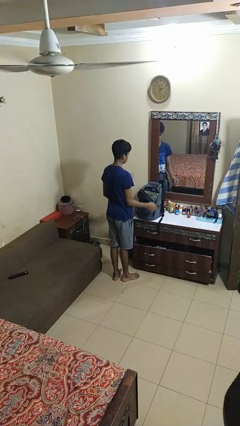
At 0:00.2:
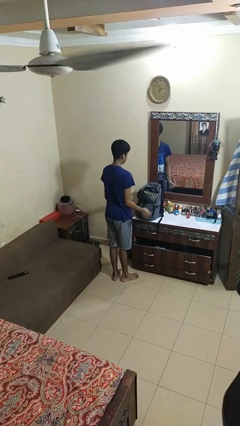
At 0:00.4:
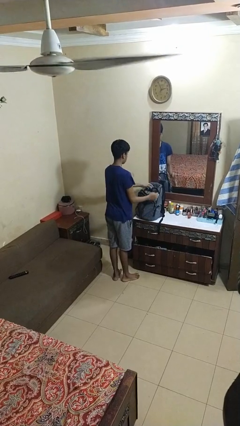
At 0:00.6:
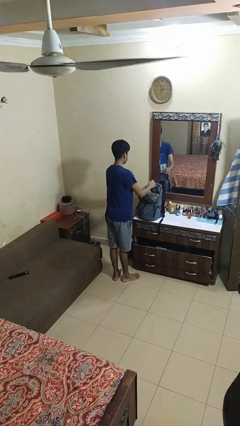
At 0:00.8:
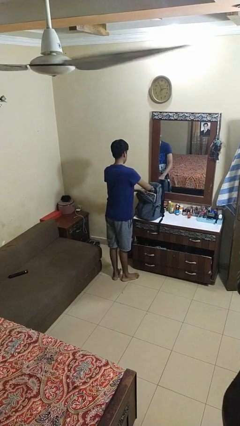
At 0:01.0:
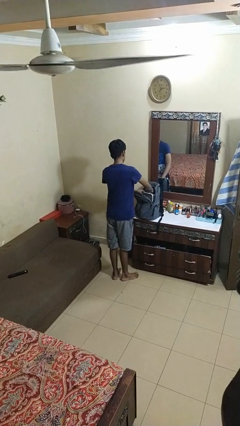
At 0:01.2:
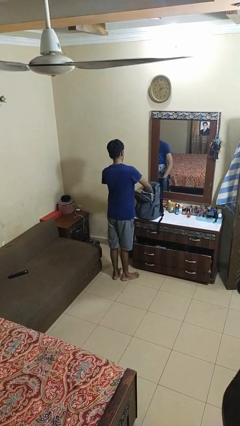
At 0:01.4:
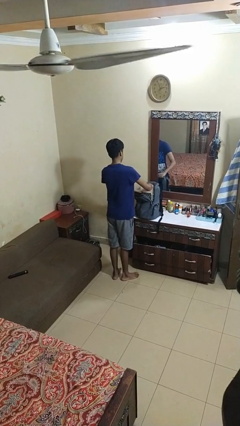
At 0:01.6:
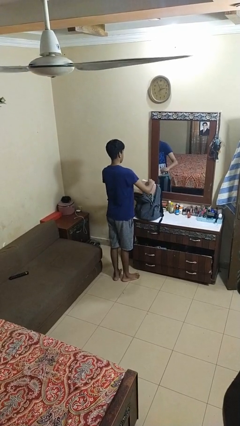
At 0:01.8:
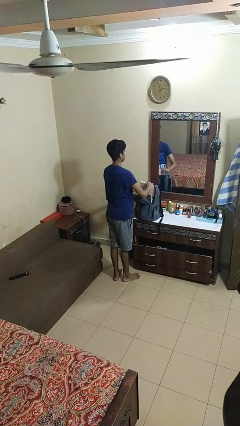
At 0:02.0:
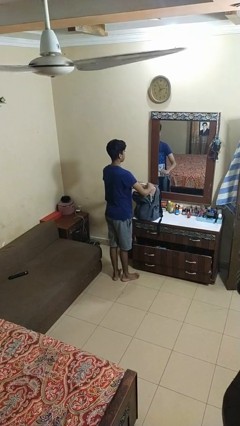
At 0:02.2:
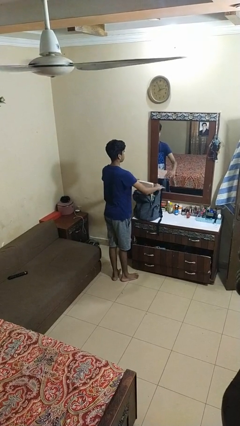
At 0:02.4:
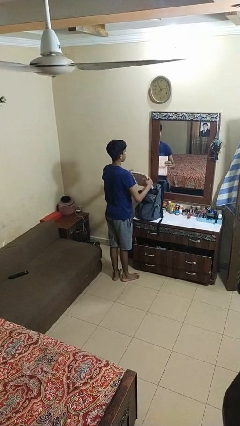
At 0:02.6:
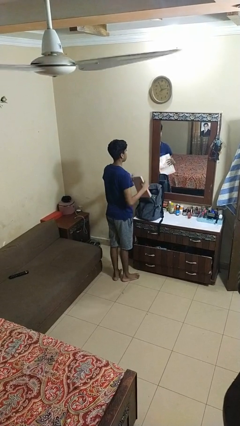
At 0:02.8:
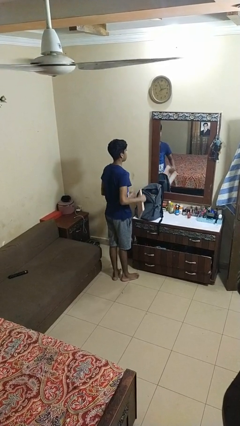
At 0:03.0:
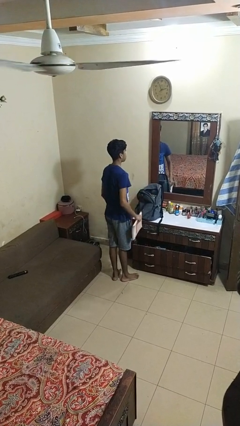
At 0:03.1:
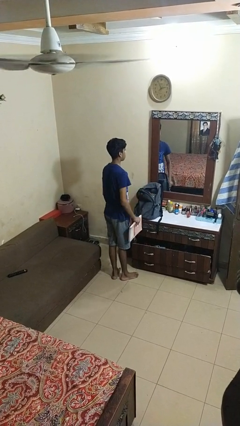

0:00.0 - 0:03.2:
person takes object from bag

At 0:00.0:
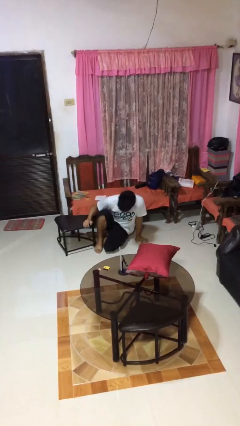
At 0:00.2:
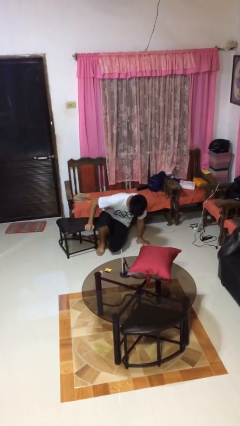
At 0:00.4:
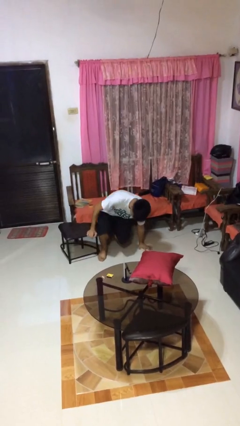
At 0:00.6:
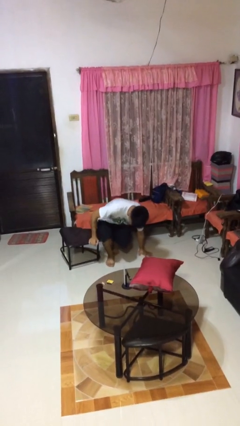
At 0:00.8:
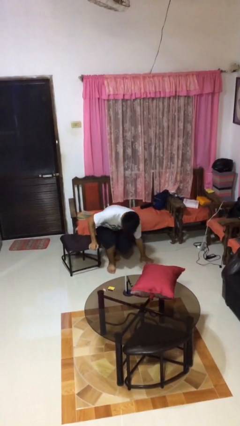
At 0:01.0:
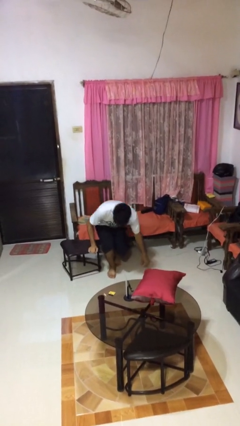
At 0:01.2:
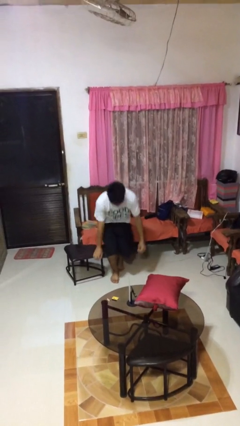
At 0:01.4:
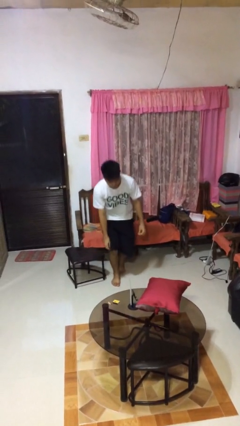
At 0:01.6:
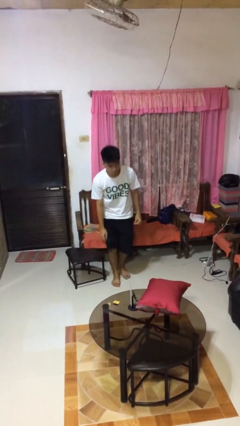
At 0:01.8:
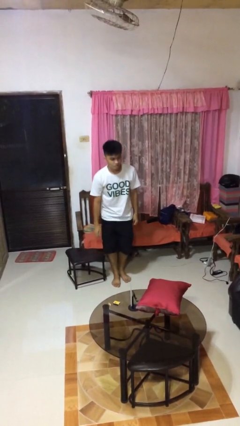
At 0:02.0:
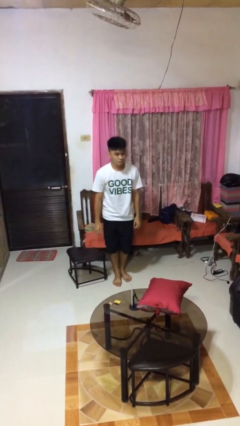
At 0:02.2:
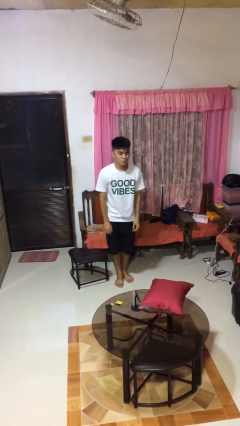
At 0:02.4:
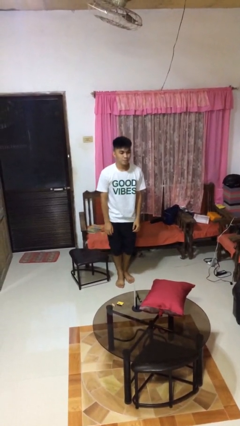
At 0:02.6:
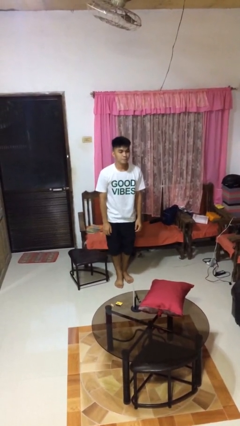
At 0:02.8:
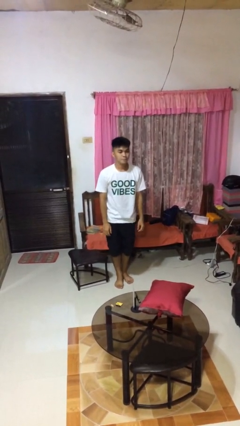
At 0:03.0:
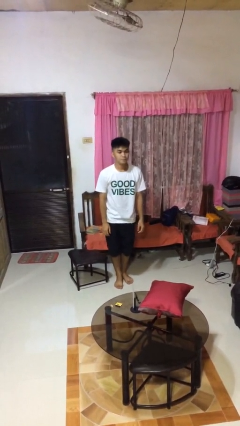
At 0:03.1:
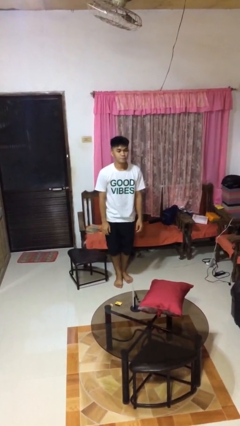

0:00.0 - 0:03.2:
person stands up from floor

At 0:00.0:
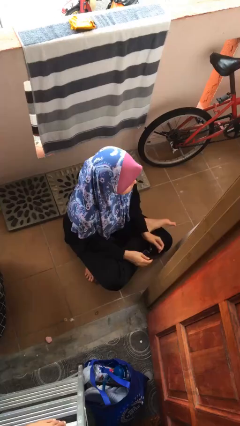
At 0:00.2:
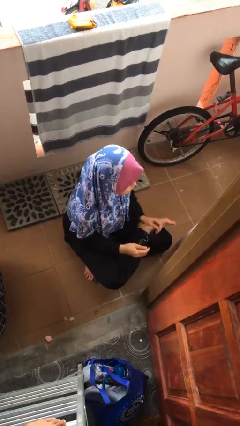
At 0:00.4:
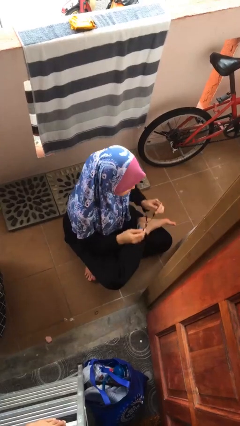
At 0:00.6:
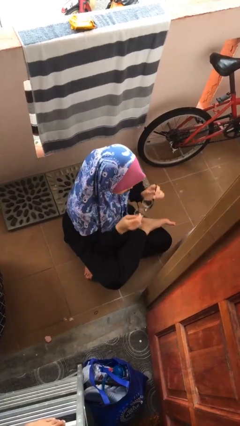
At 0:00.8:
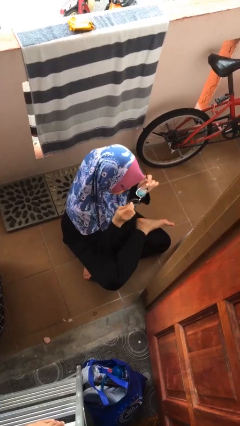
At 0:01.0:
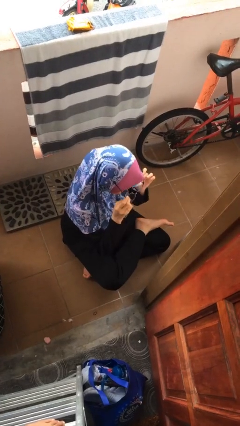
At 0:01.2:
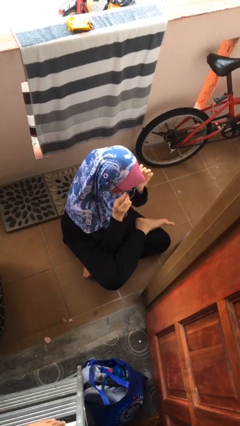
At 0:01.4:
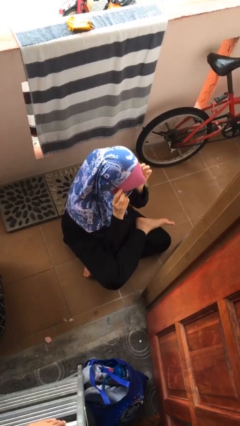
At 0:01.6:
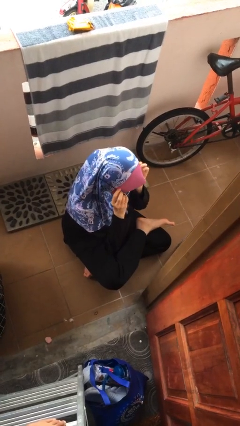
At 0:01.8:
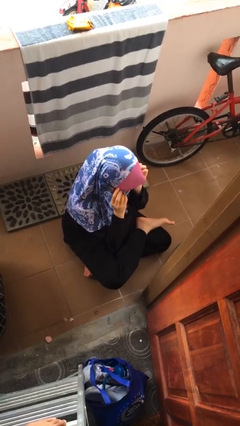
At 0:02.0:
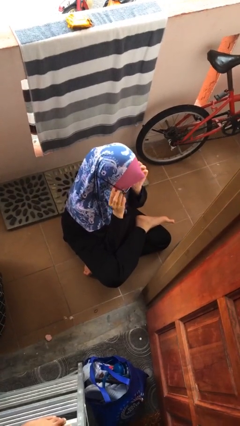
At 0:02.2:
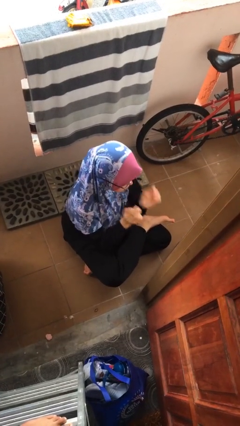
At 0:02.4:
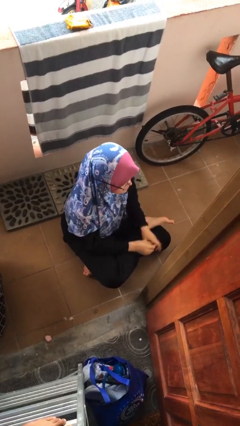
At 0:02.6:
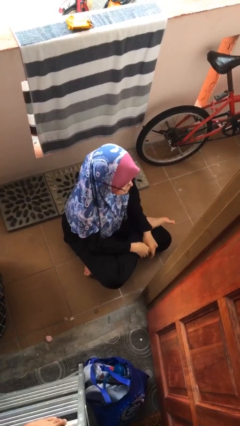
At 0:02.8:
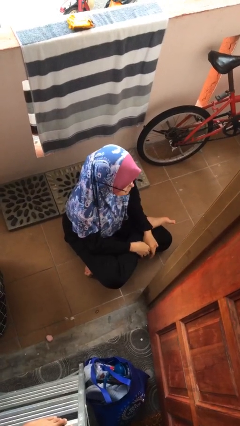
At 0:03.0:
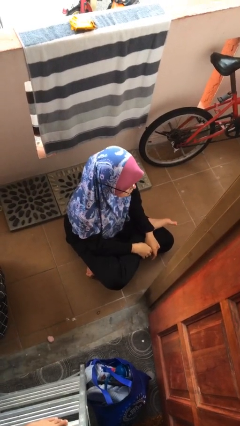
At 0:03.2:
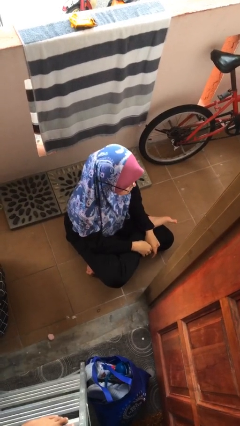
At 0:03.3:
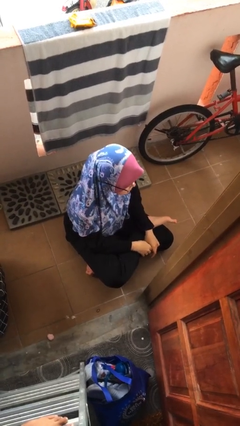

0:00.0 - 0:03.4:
person puts on glasses

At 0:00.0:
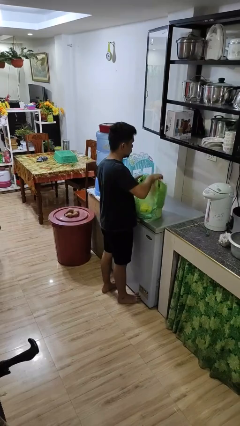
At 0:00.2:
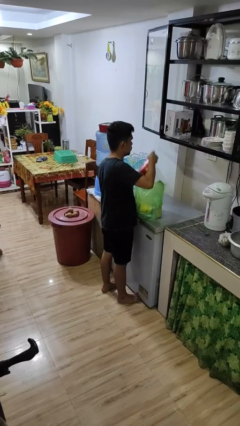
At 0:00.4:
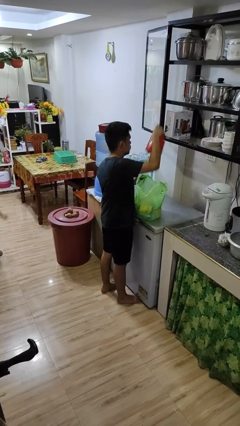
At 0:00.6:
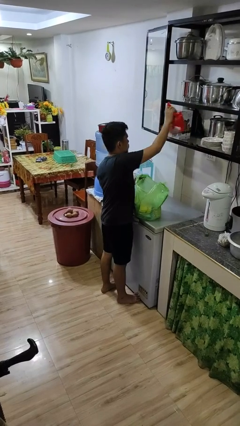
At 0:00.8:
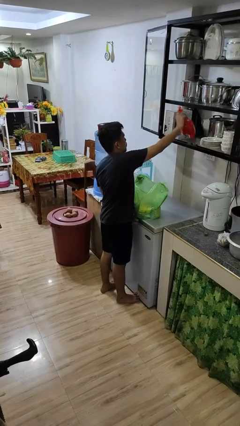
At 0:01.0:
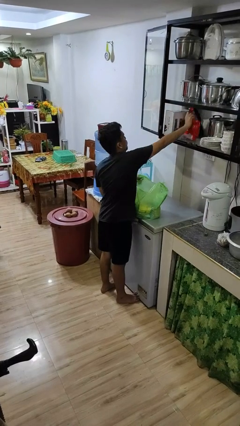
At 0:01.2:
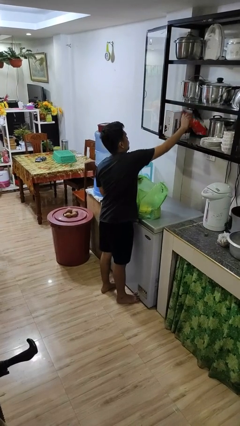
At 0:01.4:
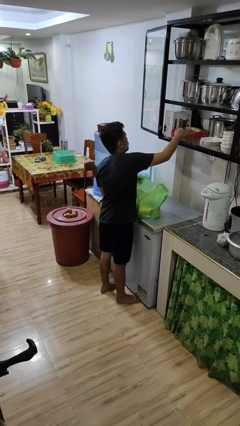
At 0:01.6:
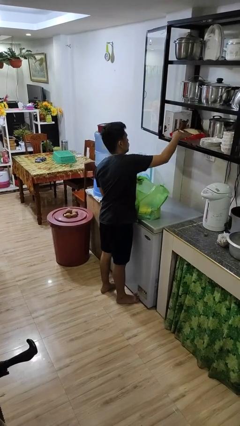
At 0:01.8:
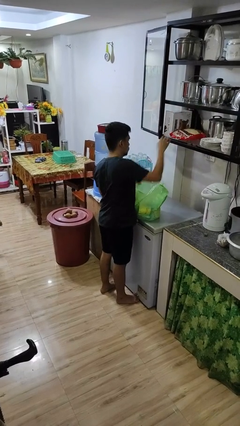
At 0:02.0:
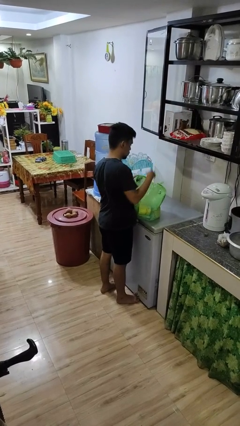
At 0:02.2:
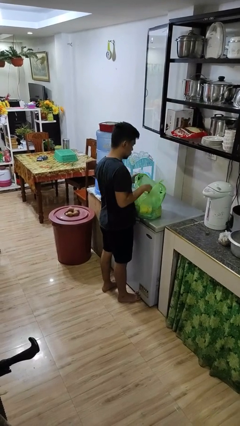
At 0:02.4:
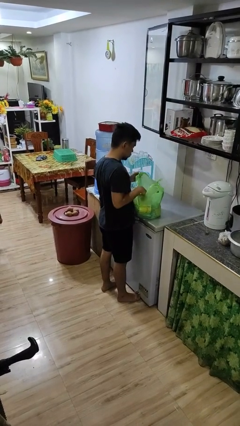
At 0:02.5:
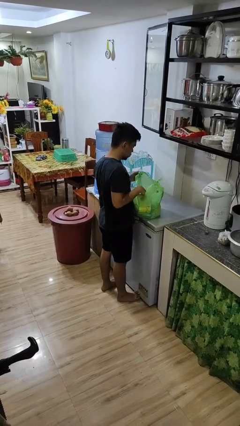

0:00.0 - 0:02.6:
person loads groceries into cabinet

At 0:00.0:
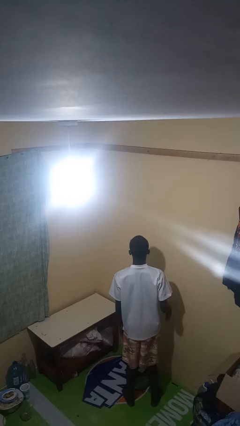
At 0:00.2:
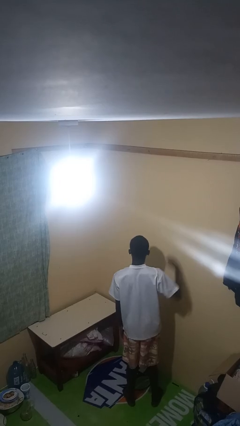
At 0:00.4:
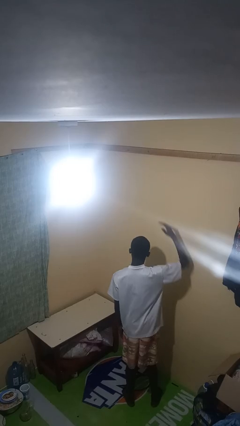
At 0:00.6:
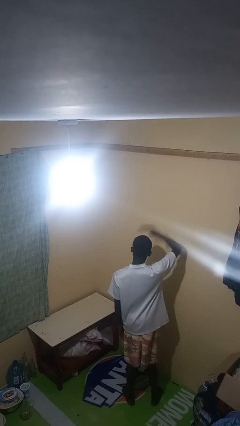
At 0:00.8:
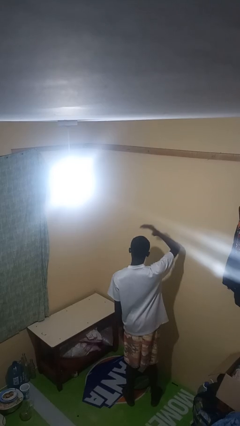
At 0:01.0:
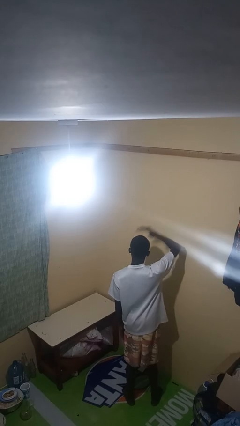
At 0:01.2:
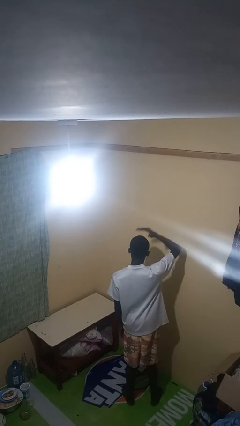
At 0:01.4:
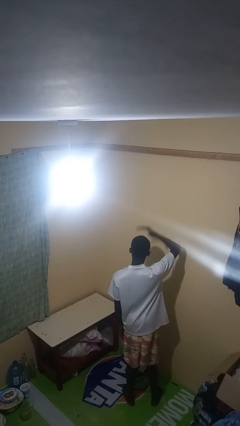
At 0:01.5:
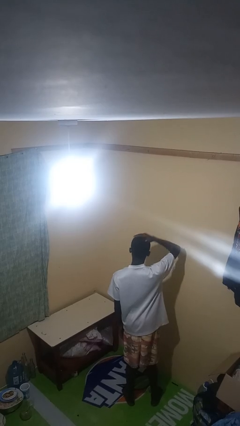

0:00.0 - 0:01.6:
person pats head

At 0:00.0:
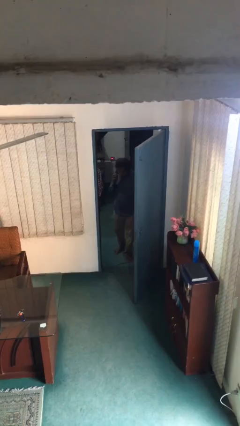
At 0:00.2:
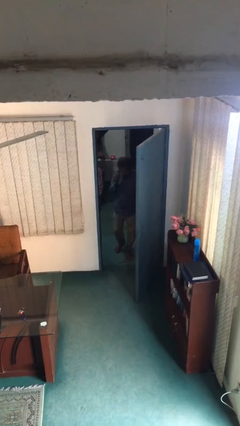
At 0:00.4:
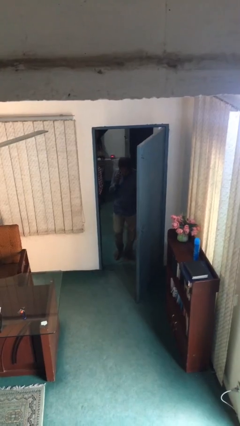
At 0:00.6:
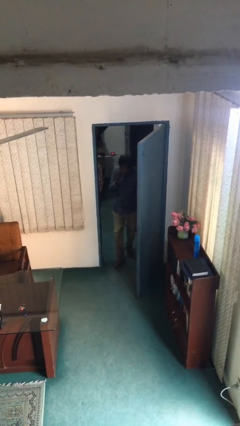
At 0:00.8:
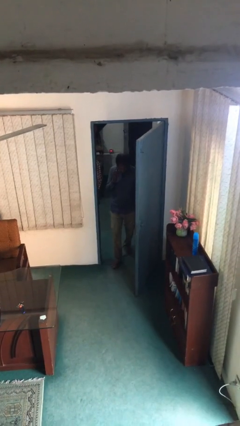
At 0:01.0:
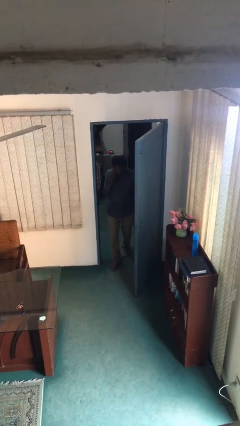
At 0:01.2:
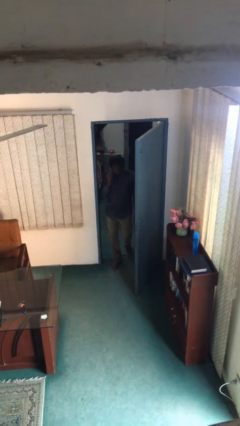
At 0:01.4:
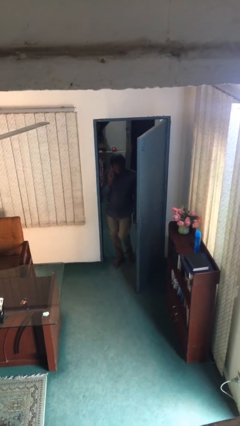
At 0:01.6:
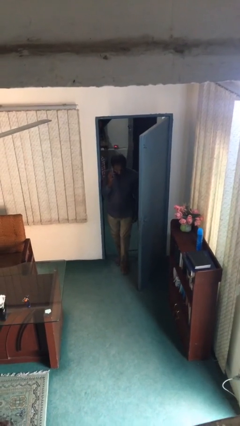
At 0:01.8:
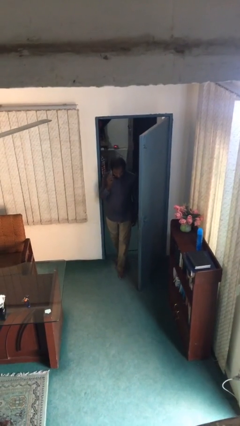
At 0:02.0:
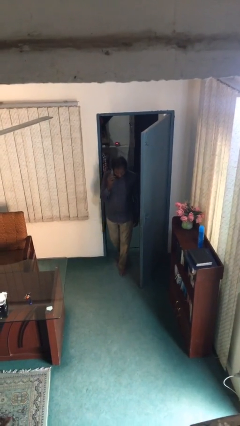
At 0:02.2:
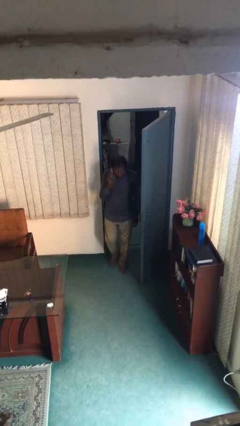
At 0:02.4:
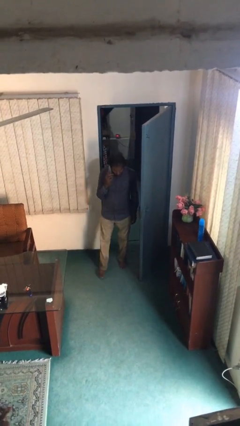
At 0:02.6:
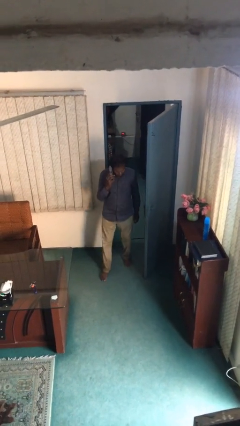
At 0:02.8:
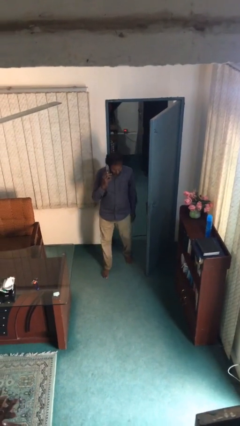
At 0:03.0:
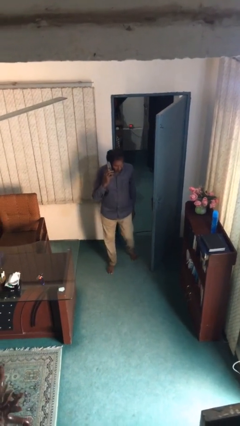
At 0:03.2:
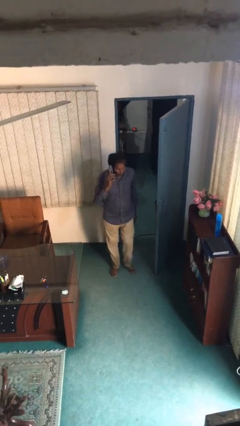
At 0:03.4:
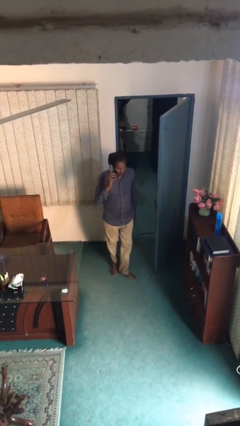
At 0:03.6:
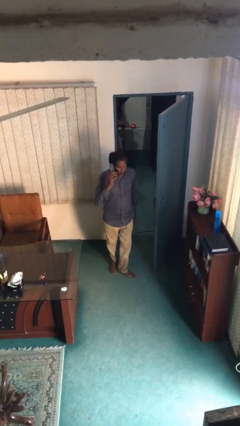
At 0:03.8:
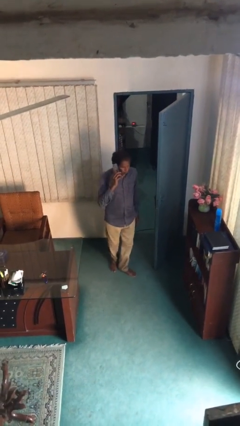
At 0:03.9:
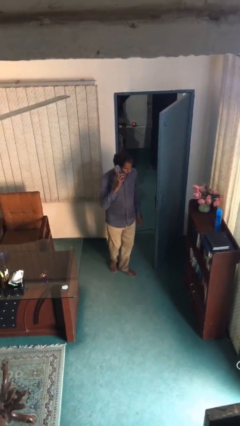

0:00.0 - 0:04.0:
person enters scene through structure
